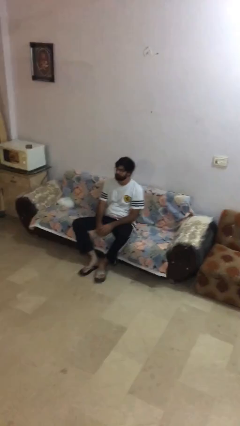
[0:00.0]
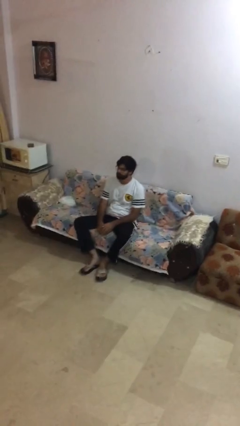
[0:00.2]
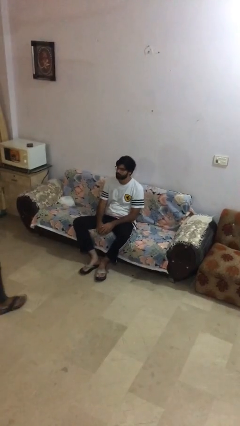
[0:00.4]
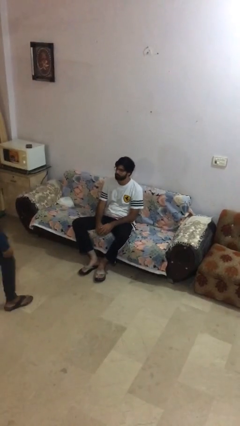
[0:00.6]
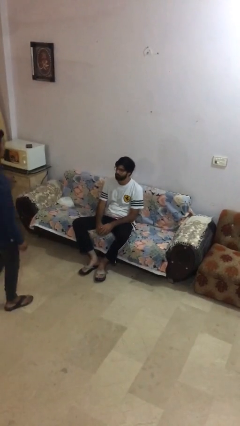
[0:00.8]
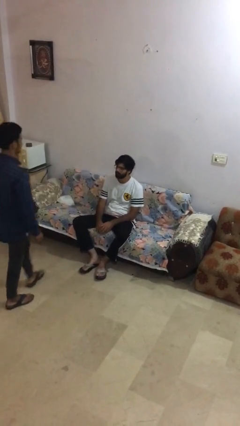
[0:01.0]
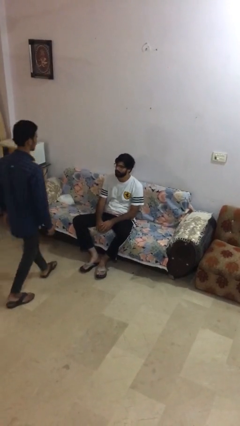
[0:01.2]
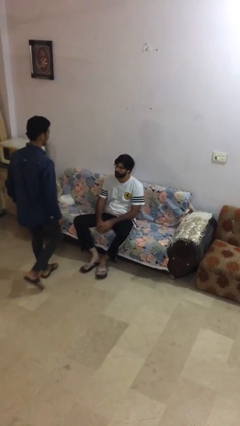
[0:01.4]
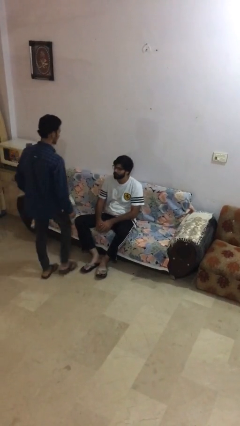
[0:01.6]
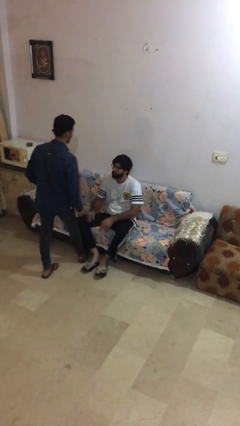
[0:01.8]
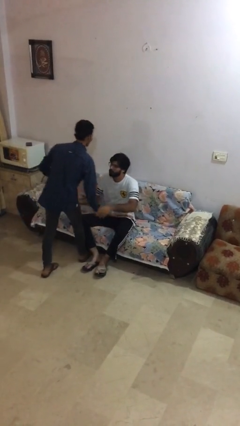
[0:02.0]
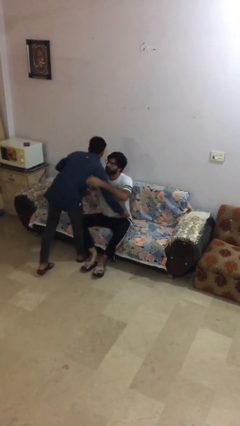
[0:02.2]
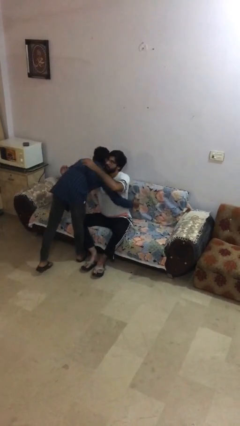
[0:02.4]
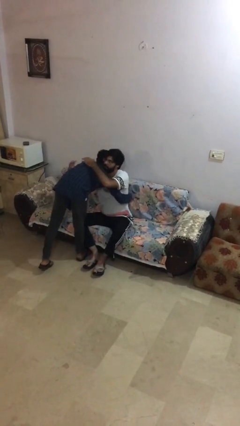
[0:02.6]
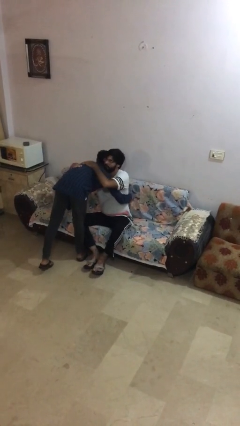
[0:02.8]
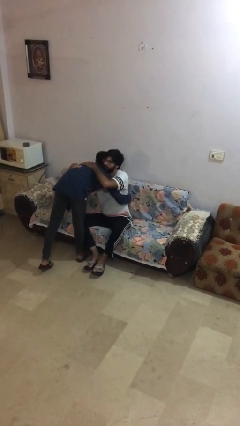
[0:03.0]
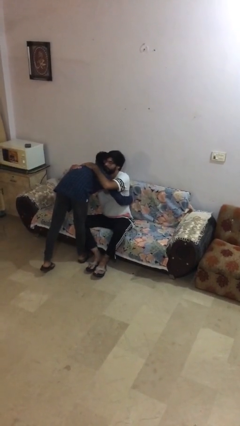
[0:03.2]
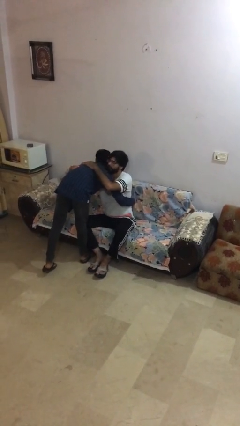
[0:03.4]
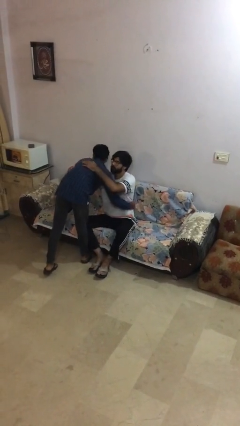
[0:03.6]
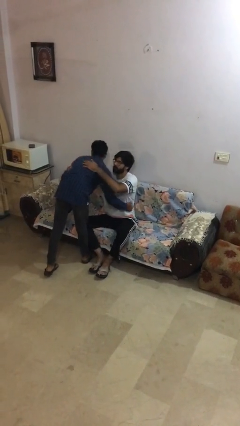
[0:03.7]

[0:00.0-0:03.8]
person embraces person

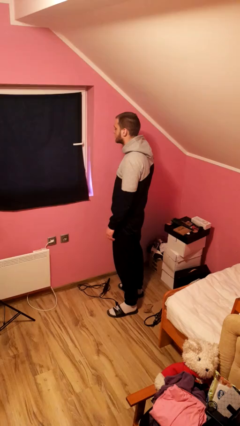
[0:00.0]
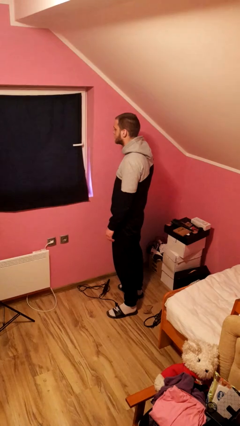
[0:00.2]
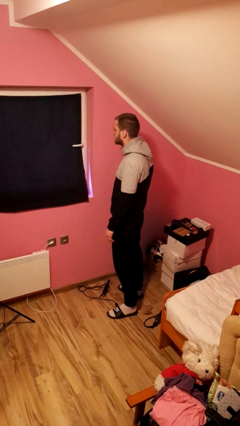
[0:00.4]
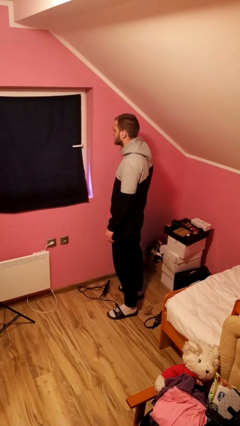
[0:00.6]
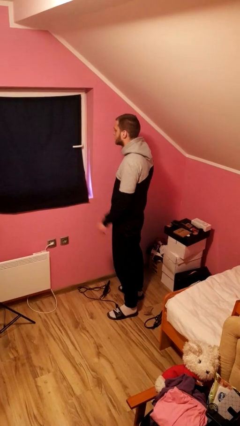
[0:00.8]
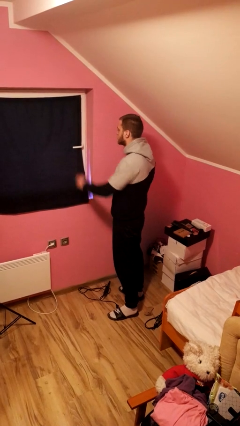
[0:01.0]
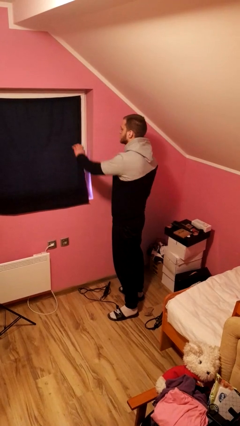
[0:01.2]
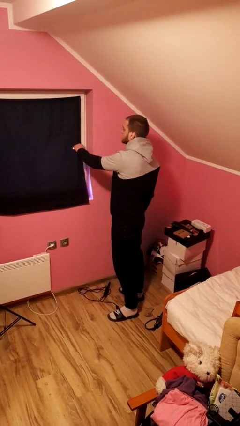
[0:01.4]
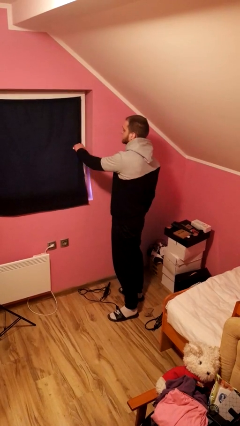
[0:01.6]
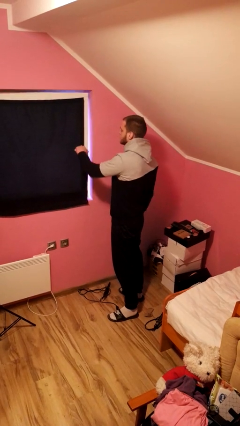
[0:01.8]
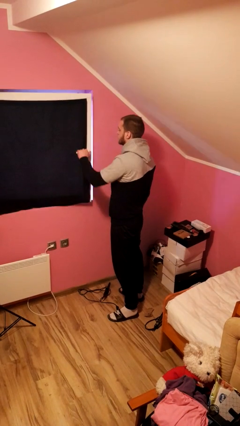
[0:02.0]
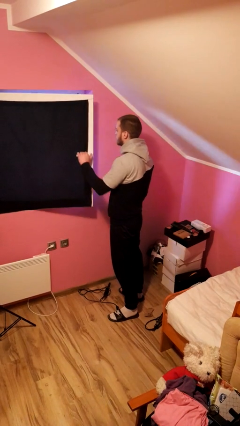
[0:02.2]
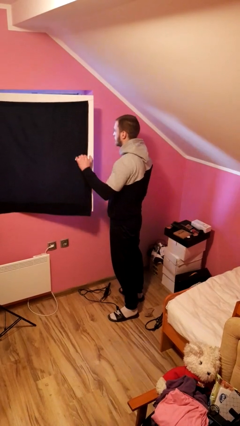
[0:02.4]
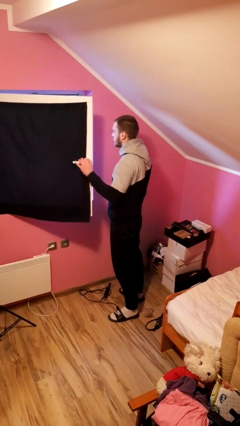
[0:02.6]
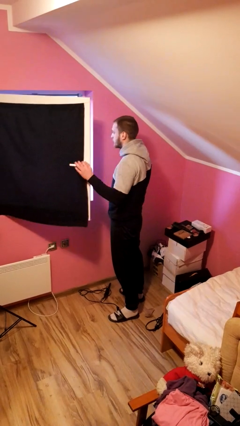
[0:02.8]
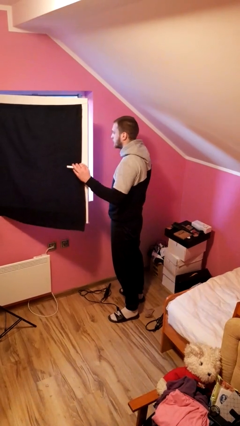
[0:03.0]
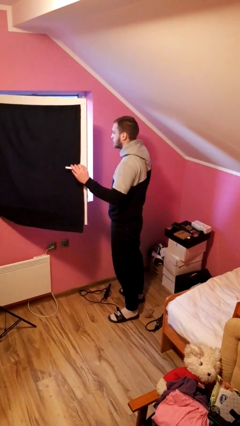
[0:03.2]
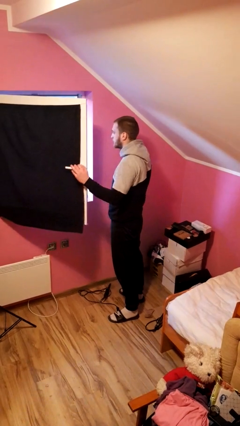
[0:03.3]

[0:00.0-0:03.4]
person opens home window

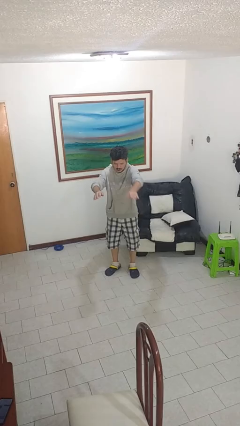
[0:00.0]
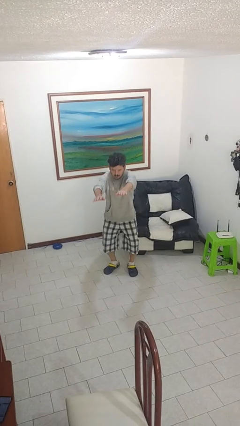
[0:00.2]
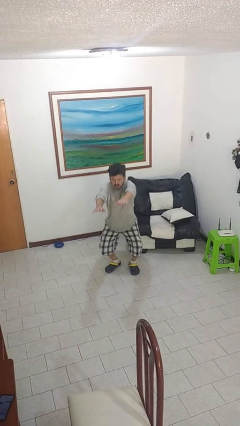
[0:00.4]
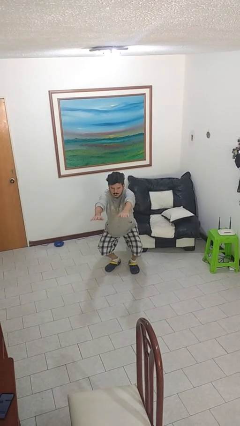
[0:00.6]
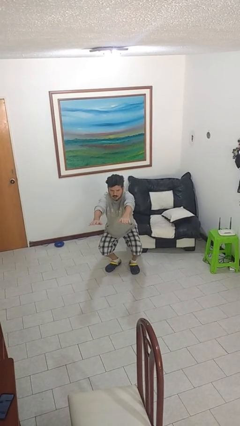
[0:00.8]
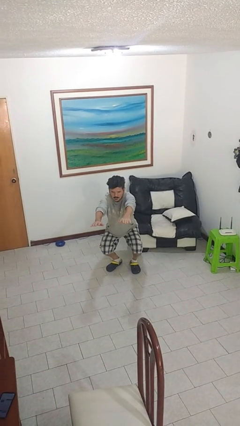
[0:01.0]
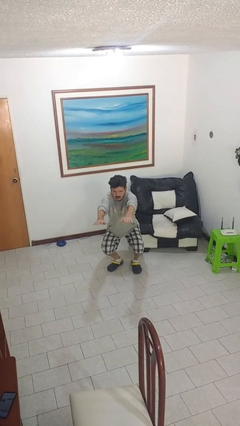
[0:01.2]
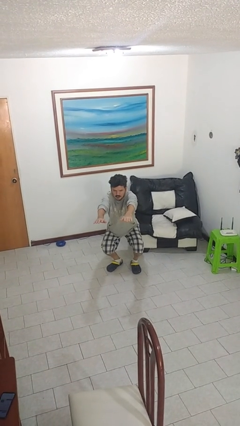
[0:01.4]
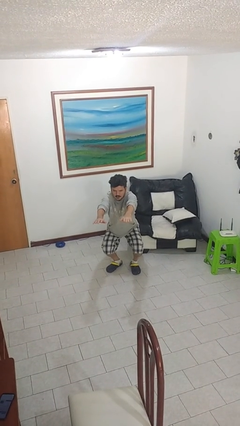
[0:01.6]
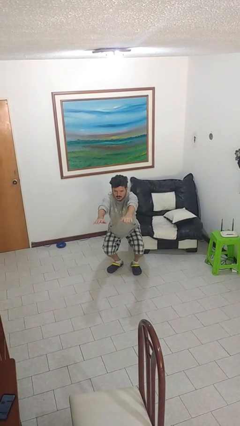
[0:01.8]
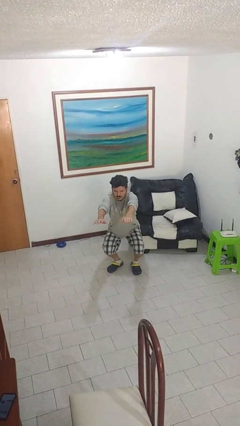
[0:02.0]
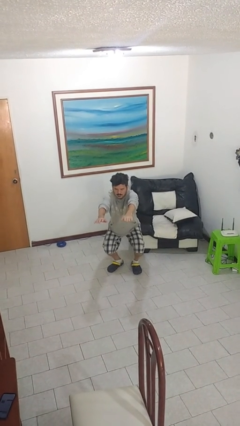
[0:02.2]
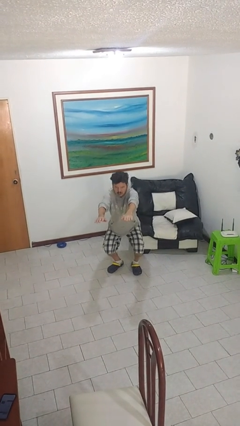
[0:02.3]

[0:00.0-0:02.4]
person squats

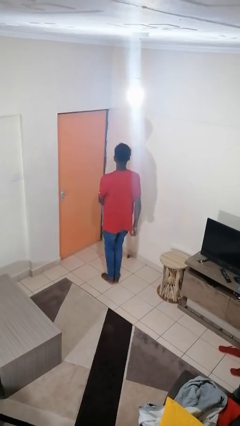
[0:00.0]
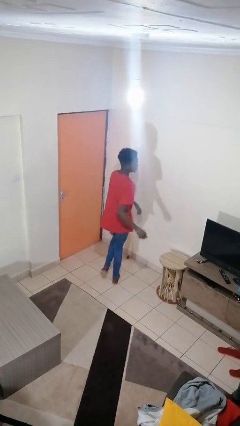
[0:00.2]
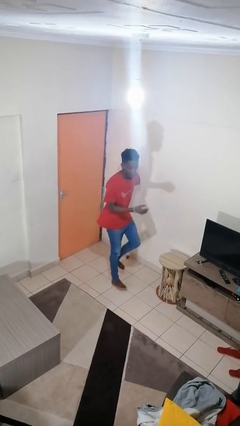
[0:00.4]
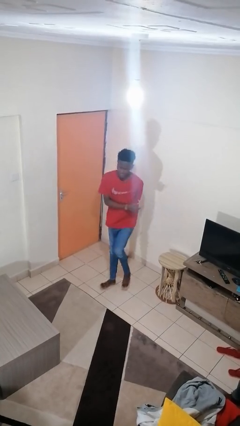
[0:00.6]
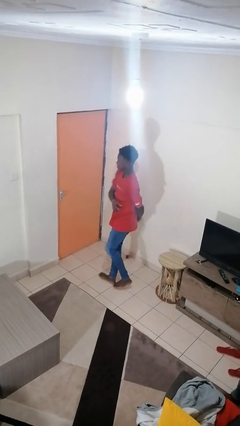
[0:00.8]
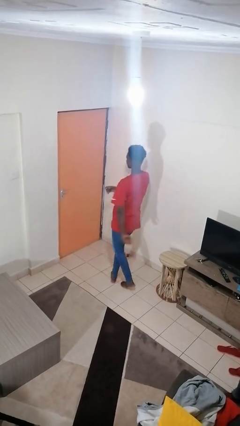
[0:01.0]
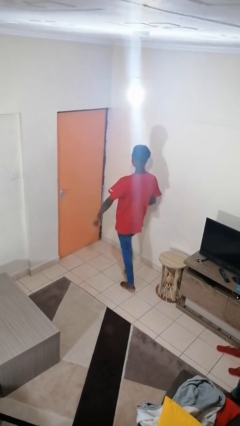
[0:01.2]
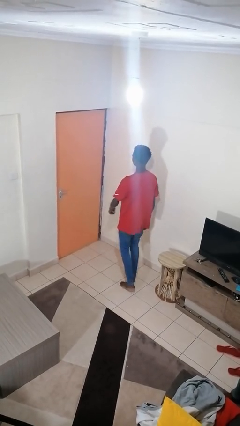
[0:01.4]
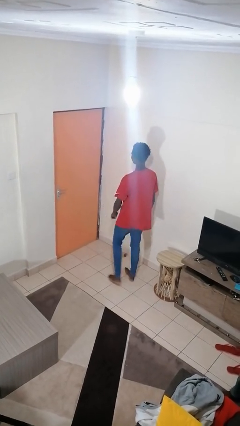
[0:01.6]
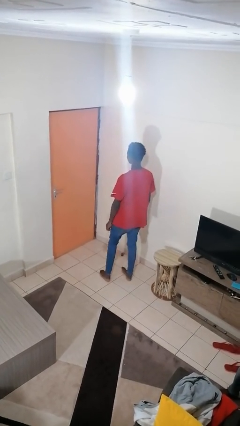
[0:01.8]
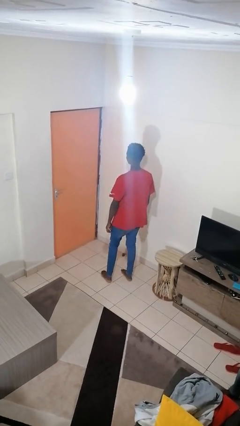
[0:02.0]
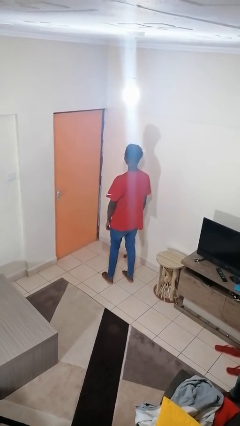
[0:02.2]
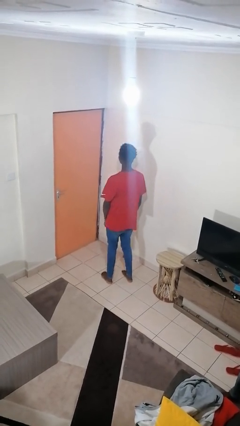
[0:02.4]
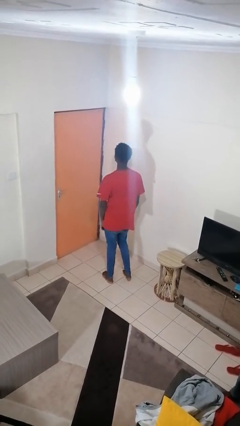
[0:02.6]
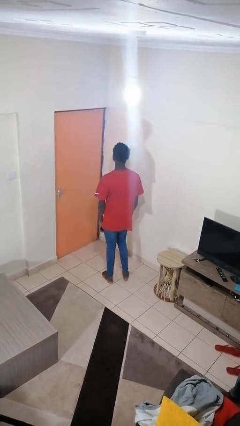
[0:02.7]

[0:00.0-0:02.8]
person twirls

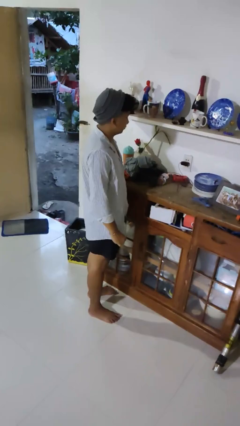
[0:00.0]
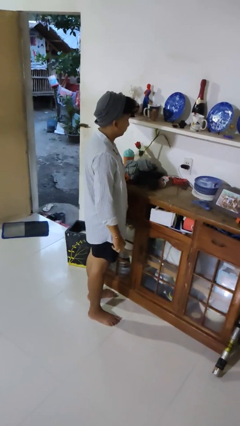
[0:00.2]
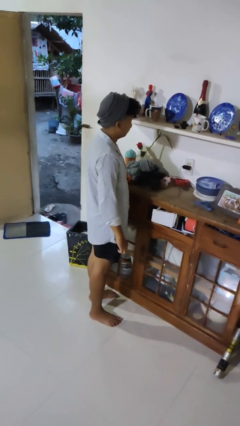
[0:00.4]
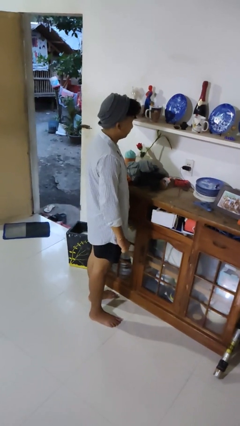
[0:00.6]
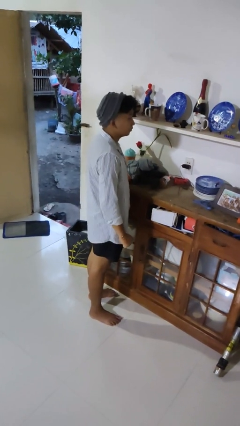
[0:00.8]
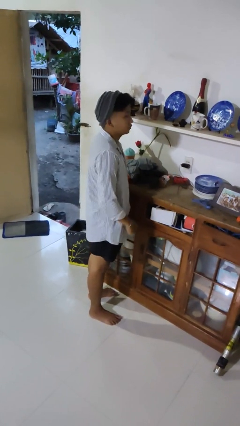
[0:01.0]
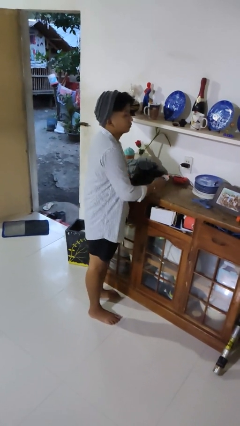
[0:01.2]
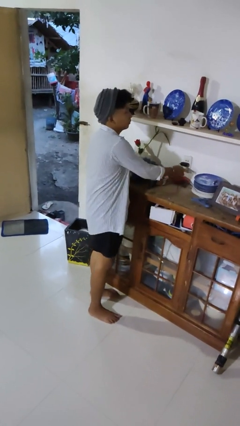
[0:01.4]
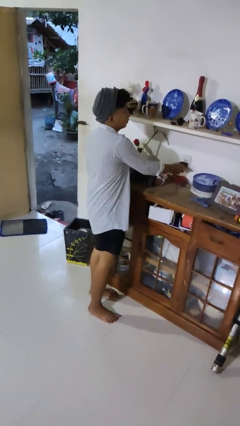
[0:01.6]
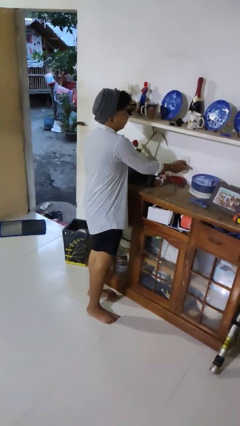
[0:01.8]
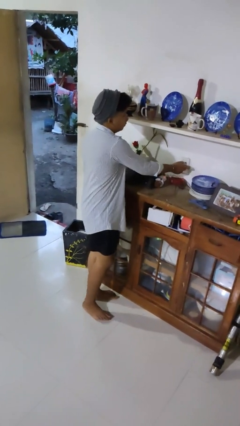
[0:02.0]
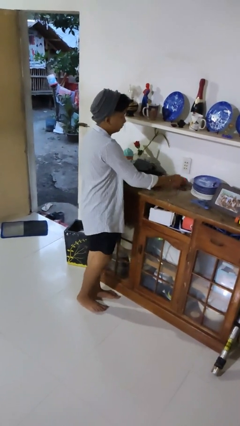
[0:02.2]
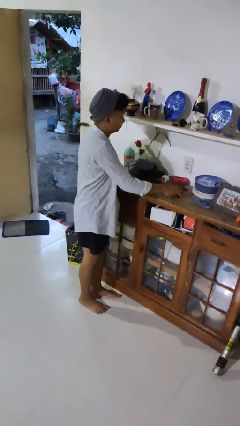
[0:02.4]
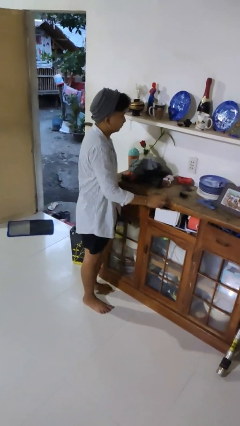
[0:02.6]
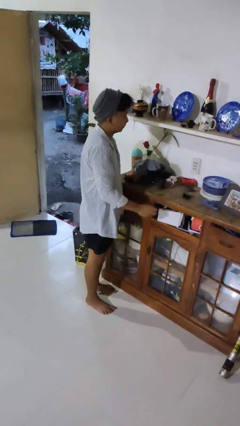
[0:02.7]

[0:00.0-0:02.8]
person unplugs from electrical socket

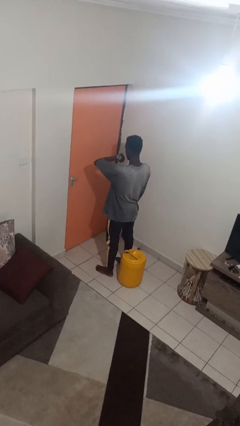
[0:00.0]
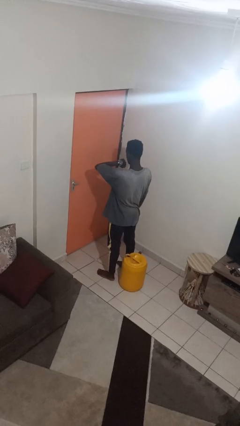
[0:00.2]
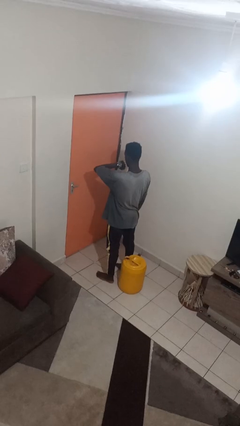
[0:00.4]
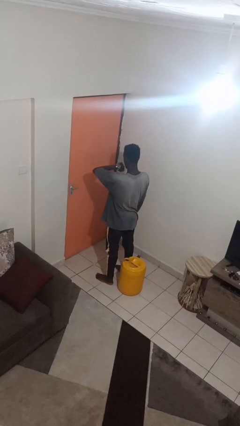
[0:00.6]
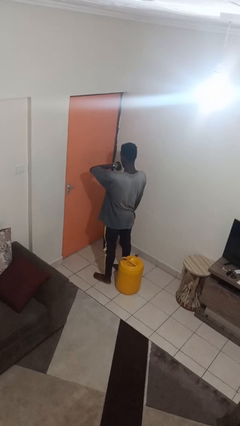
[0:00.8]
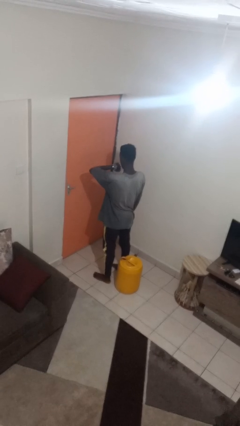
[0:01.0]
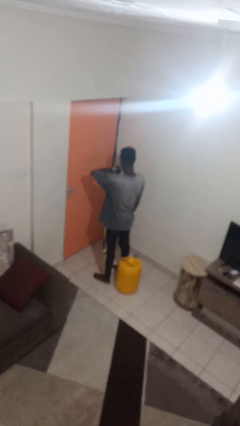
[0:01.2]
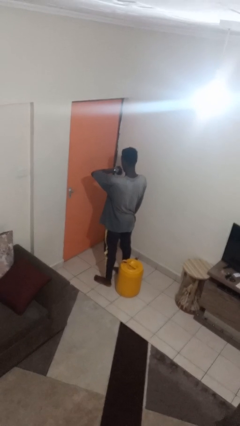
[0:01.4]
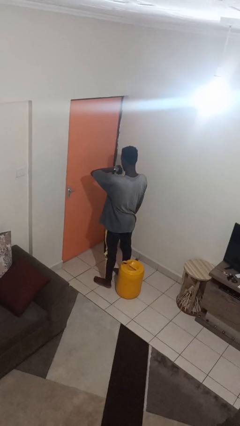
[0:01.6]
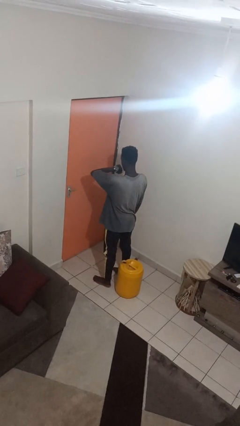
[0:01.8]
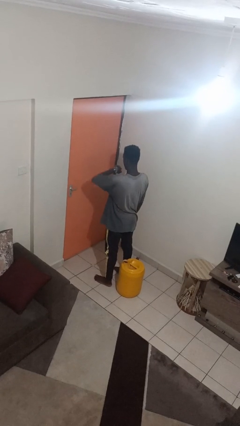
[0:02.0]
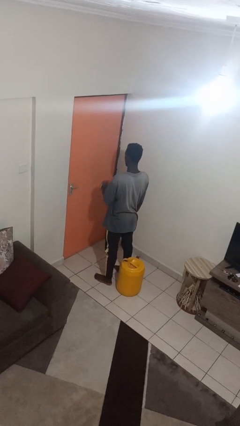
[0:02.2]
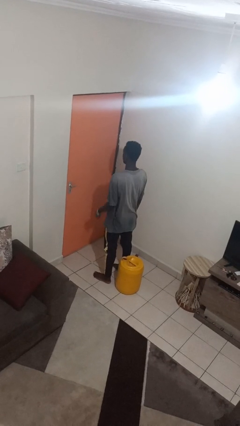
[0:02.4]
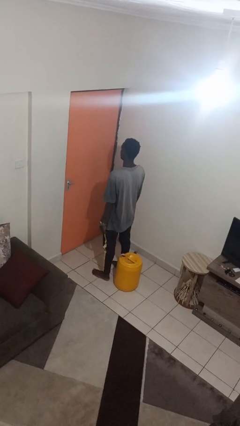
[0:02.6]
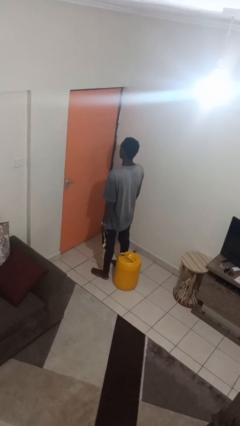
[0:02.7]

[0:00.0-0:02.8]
person looks at wristwatch
